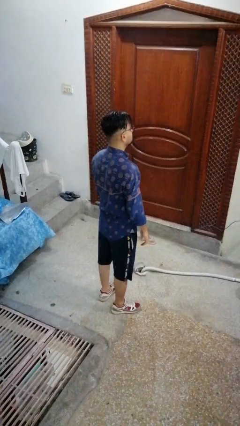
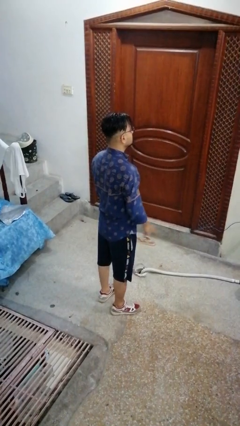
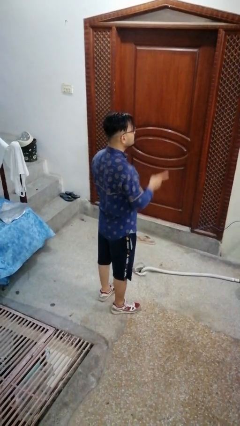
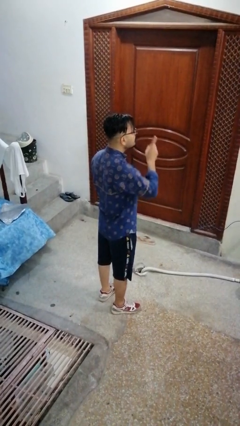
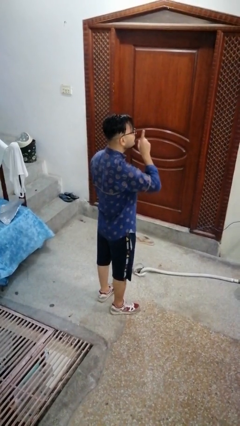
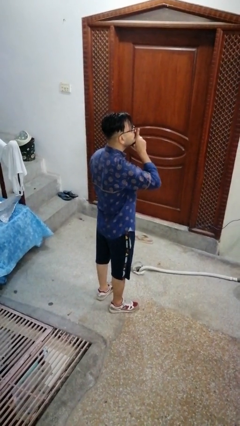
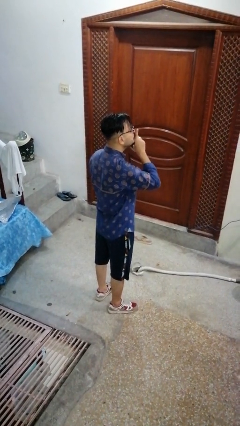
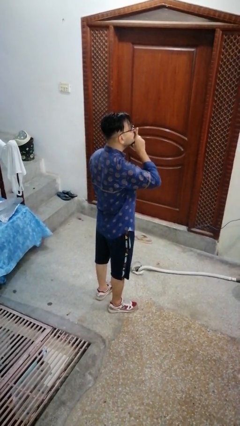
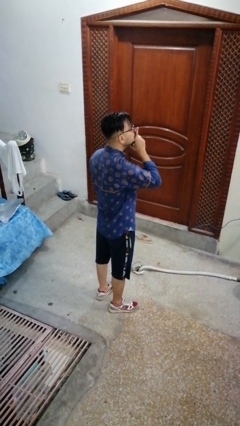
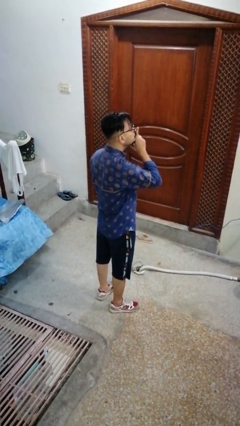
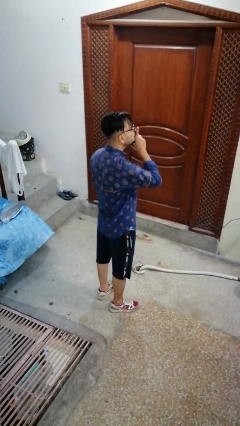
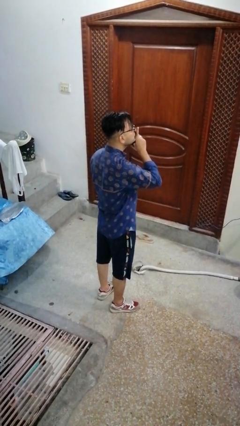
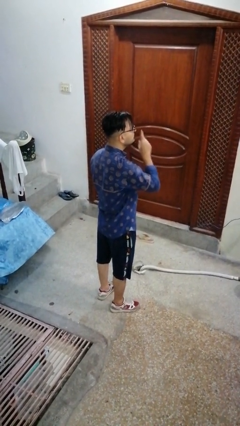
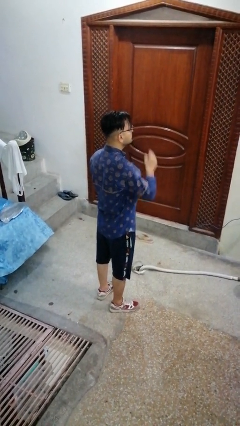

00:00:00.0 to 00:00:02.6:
person gestures be quiet

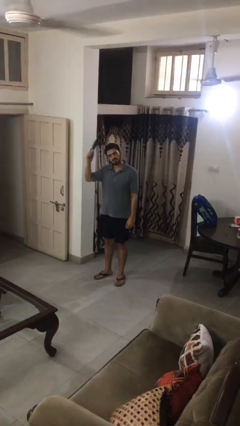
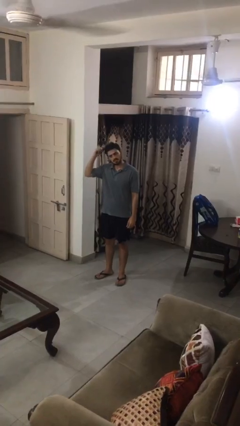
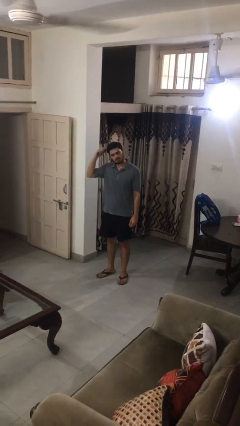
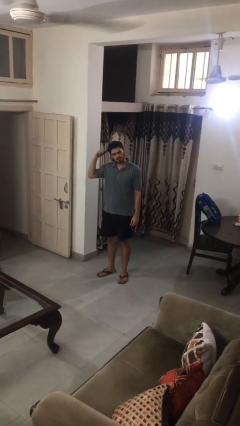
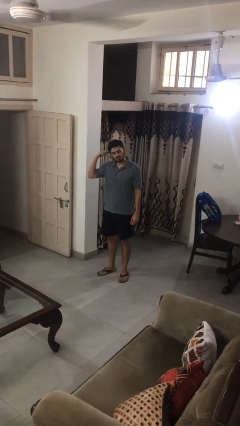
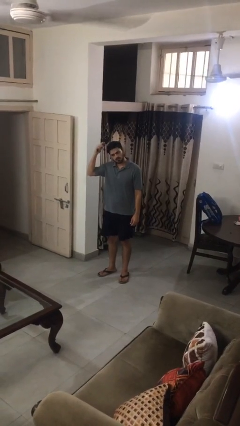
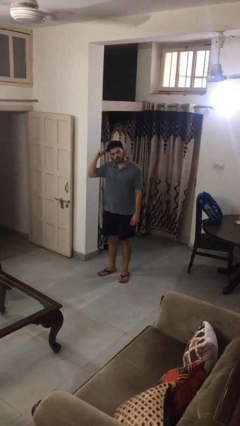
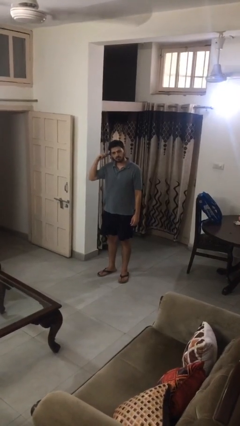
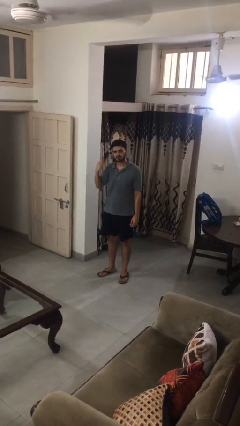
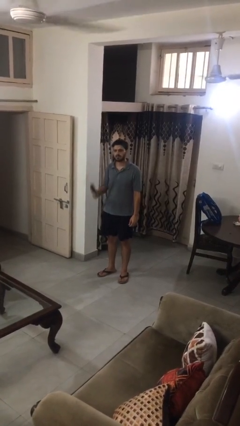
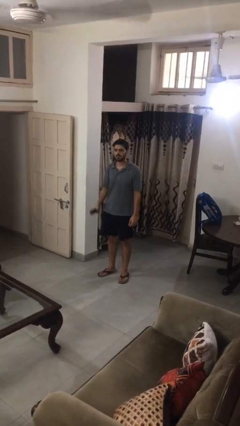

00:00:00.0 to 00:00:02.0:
person brushes hair

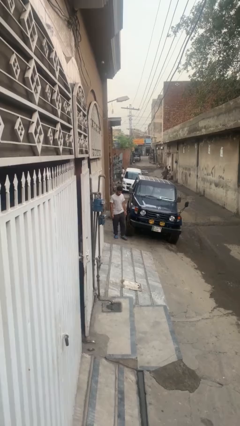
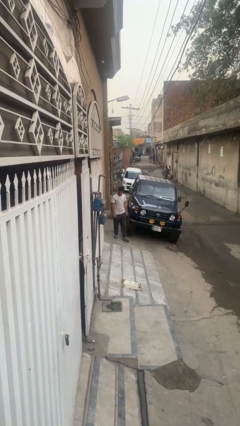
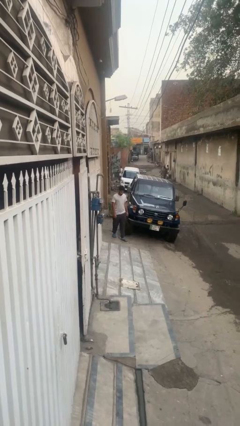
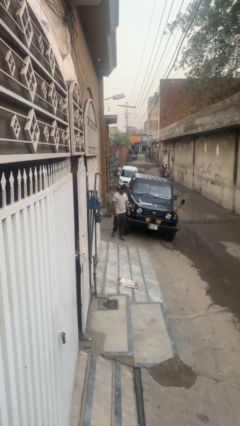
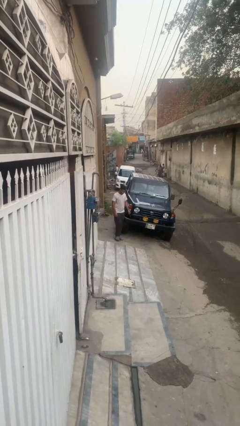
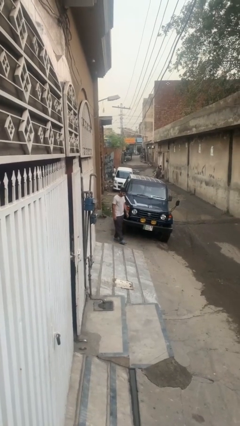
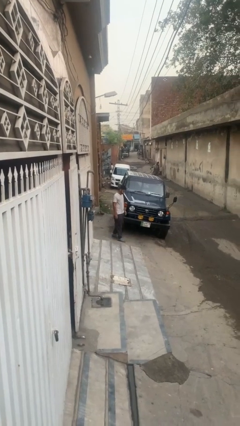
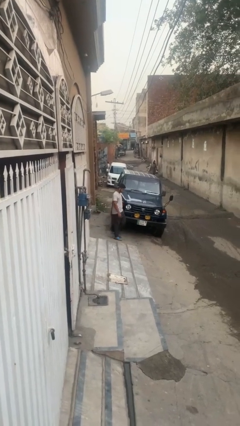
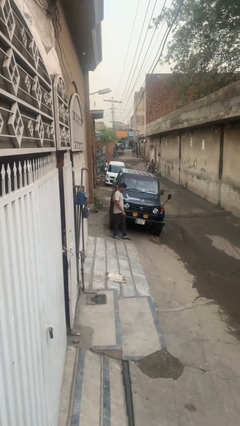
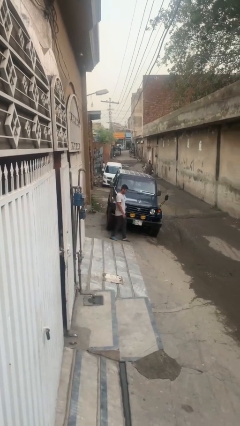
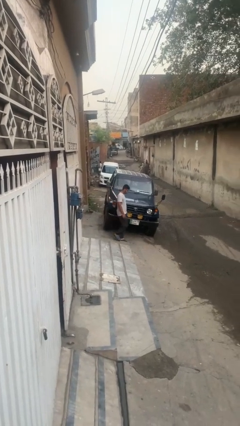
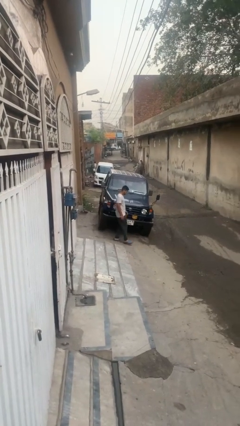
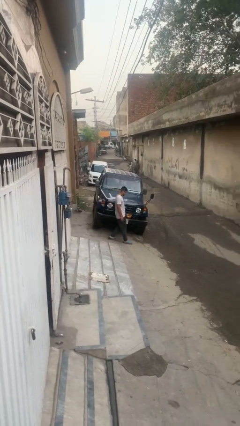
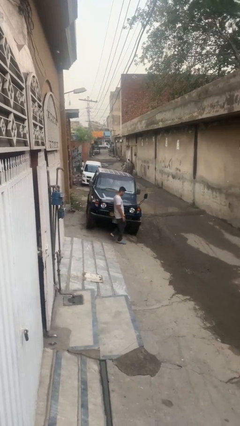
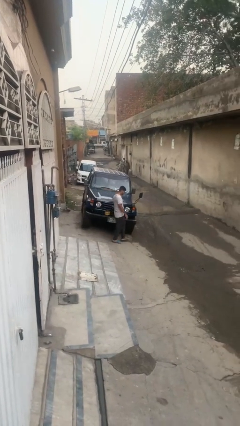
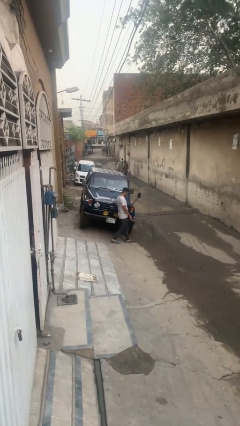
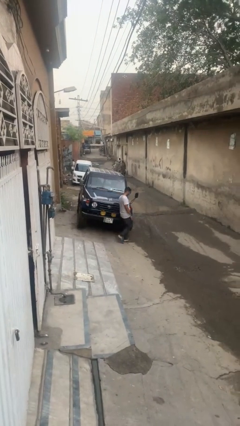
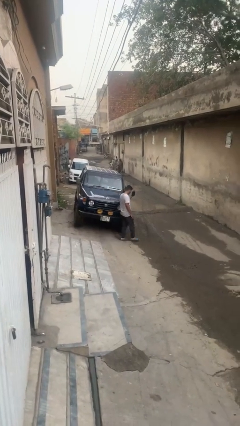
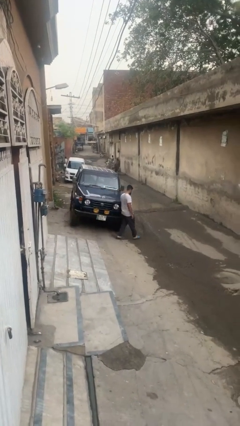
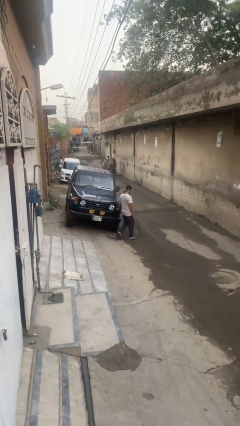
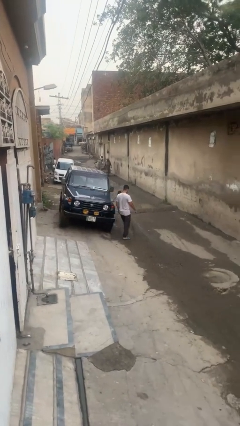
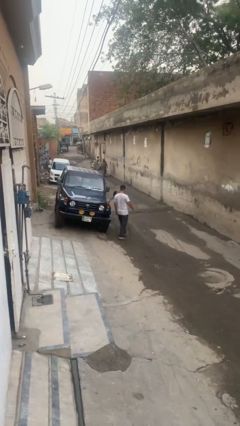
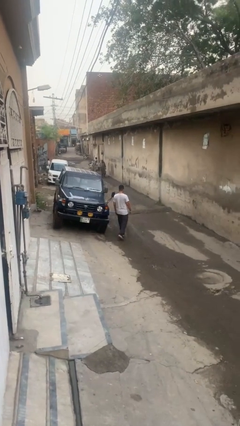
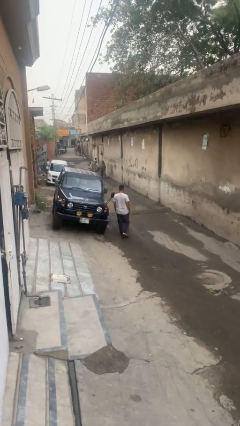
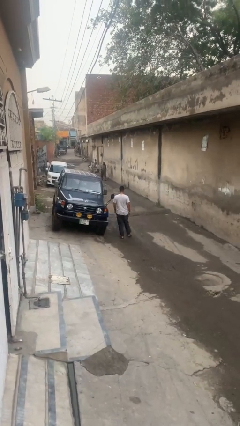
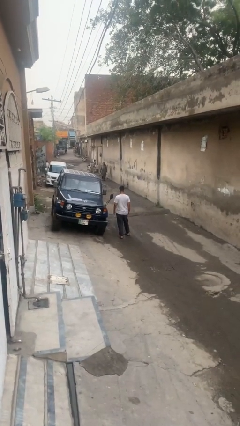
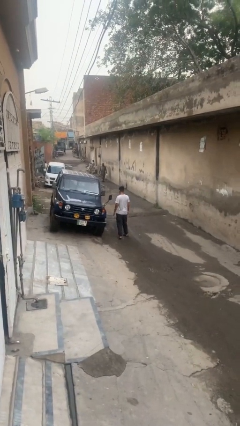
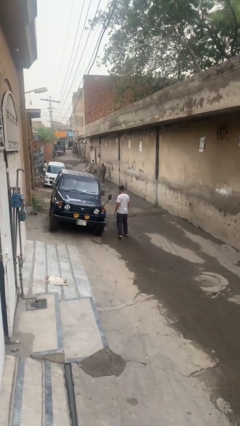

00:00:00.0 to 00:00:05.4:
person walks around car

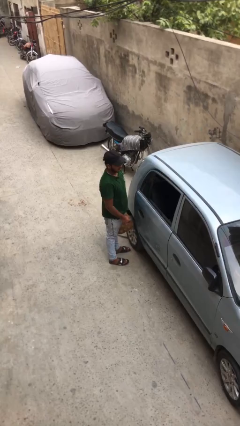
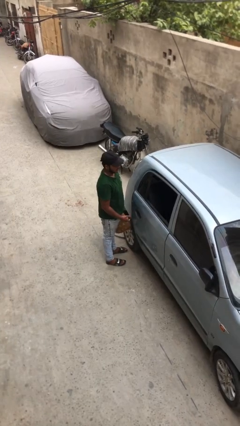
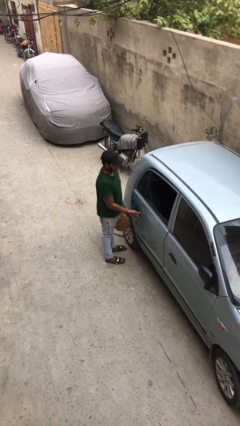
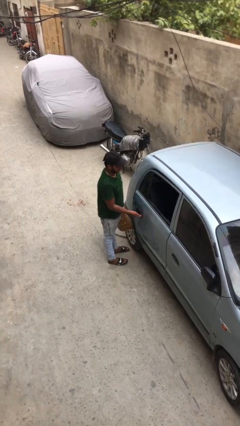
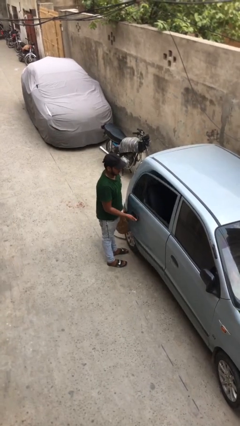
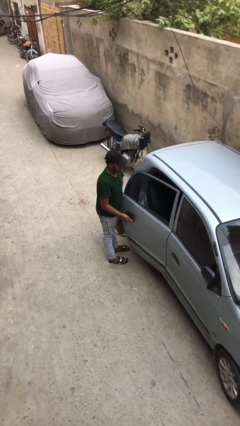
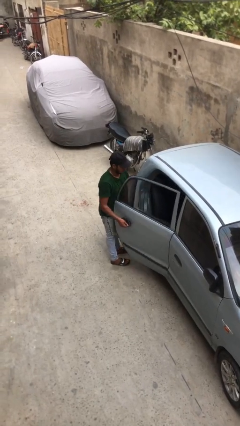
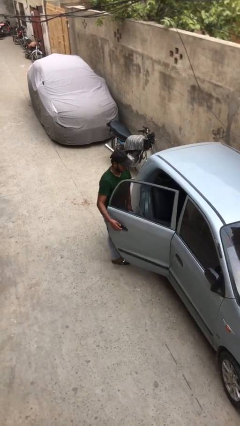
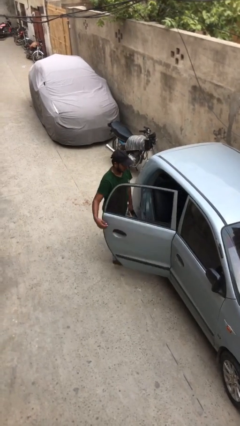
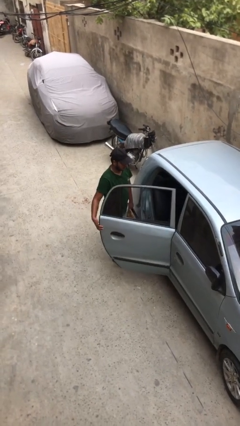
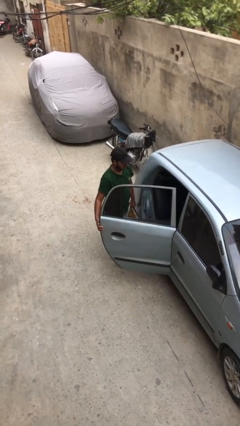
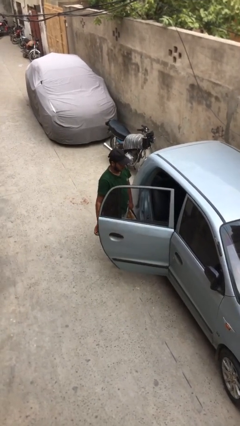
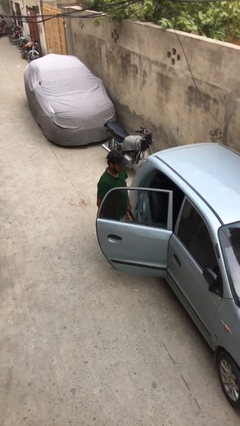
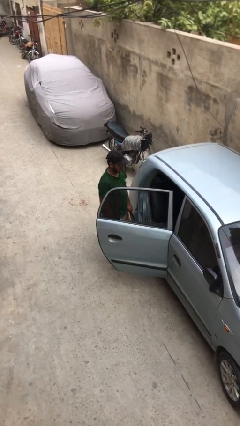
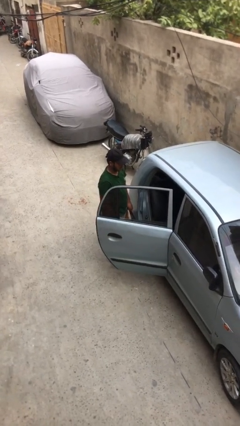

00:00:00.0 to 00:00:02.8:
person opens car door

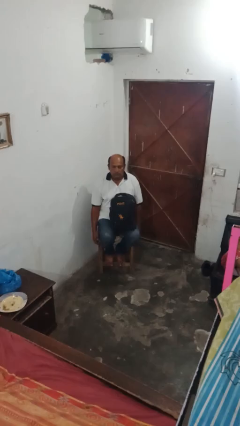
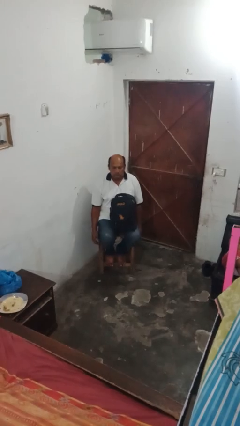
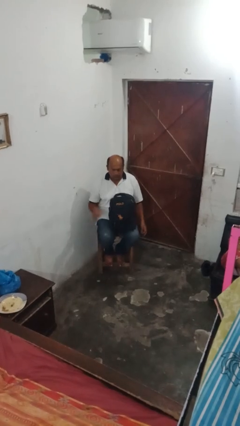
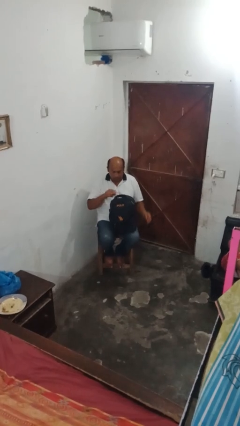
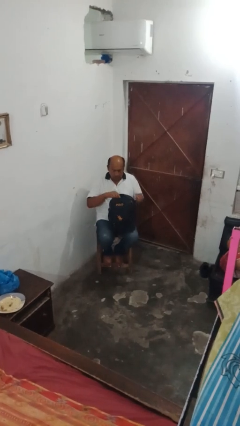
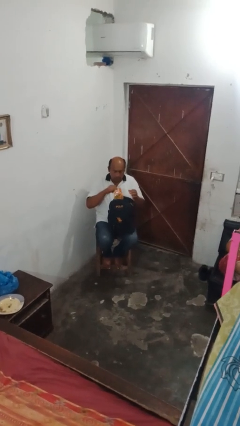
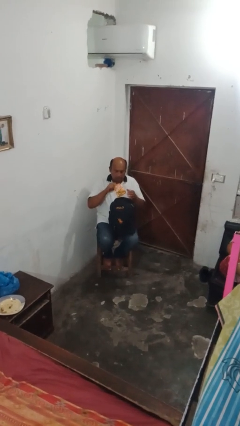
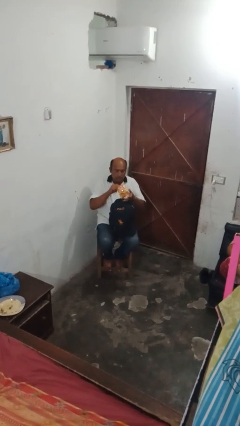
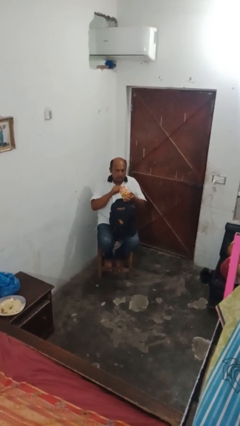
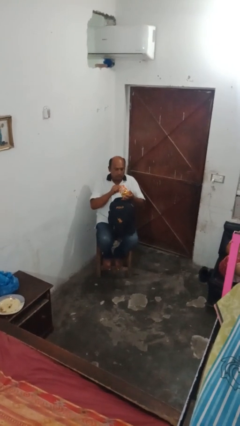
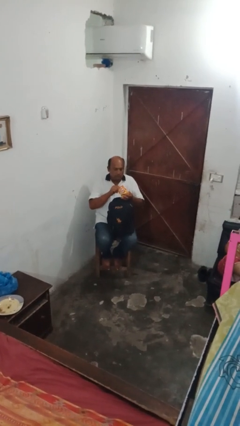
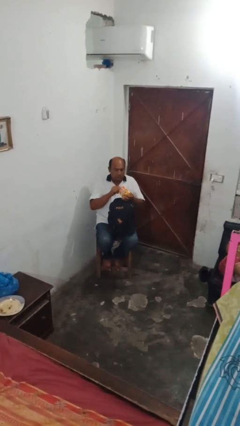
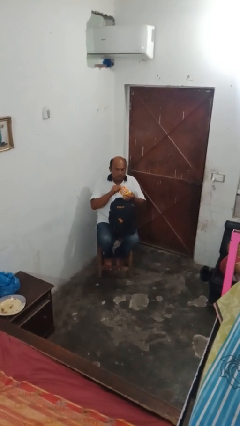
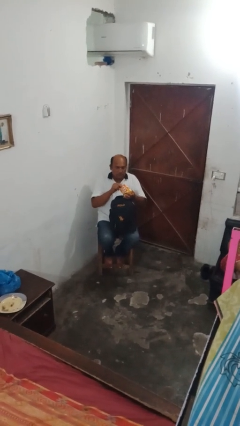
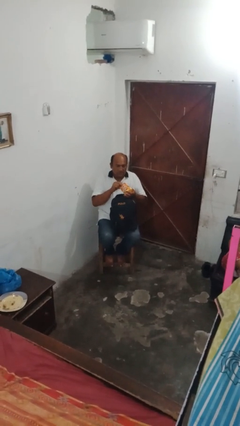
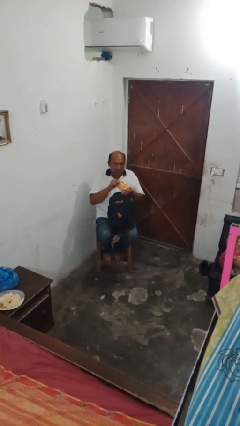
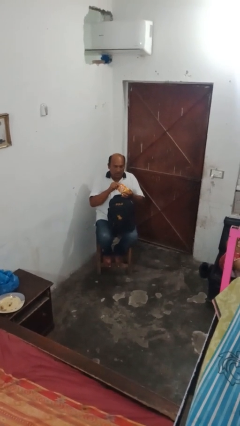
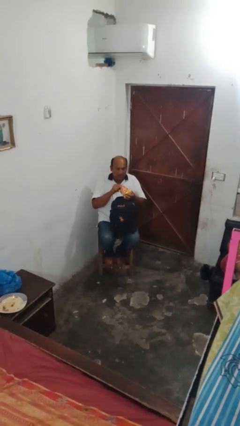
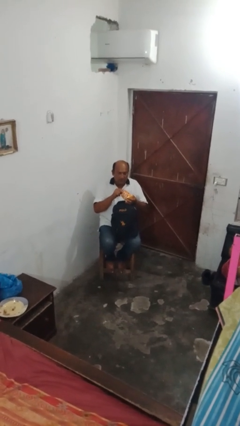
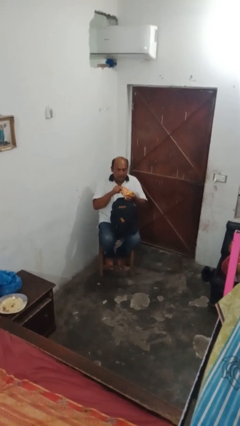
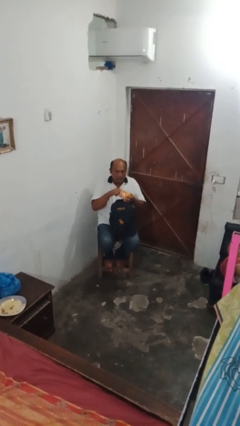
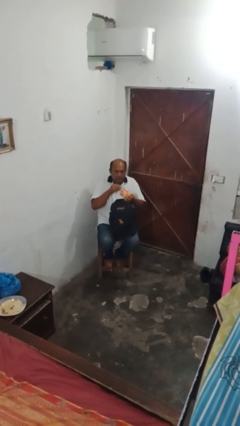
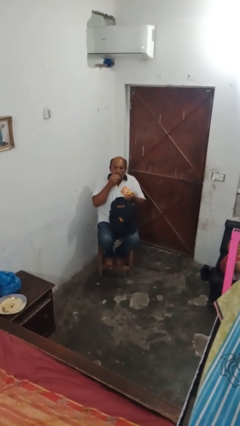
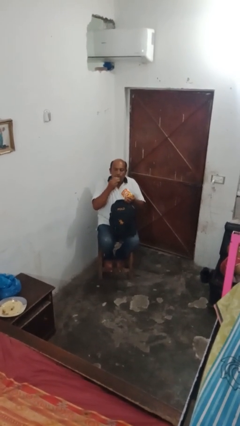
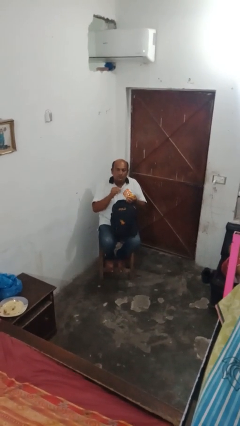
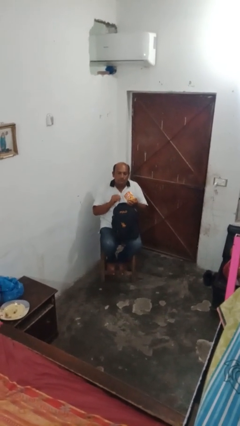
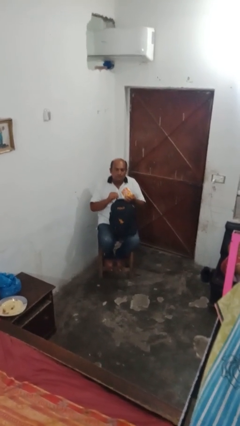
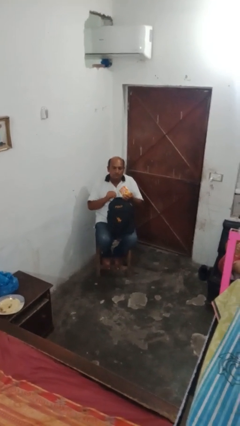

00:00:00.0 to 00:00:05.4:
person eats snack from bag
